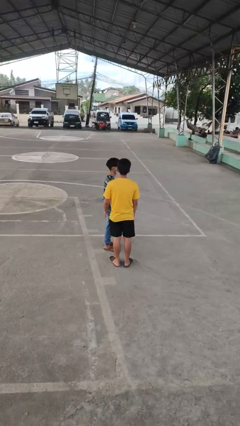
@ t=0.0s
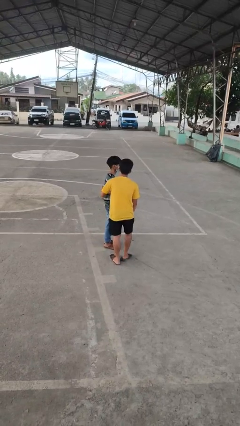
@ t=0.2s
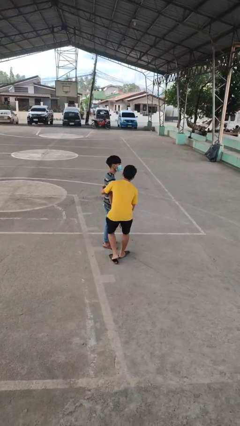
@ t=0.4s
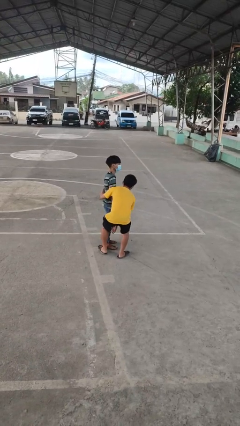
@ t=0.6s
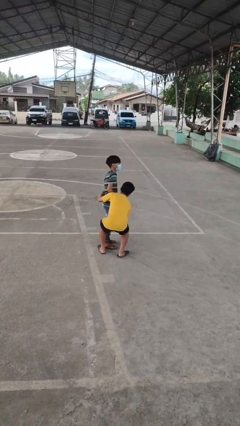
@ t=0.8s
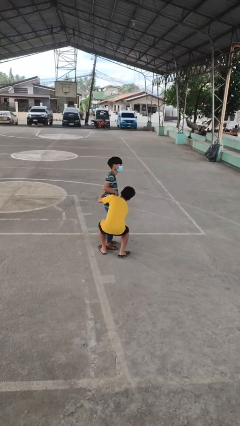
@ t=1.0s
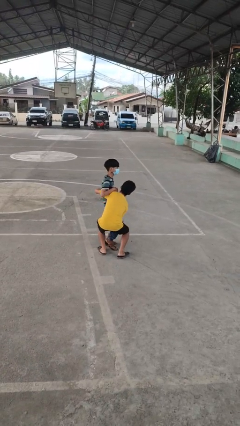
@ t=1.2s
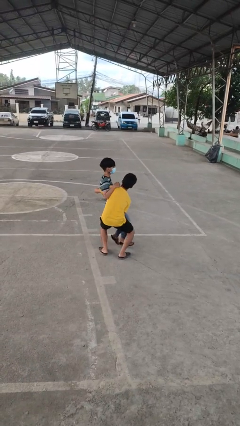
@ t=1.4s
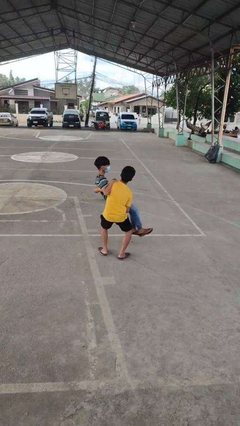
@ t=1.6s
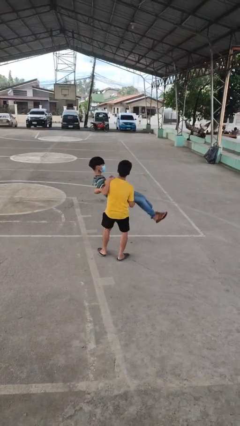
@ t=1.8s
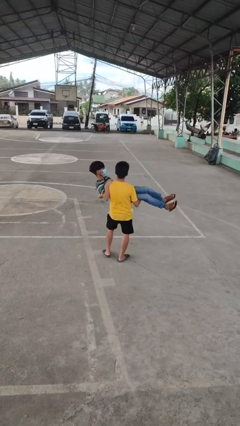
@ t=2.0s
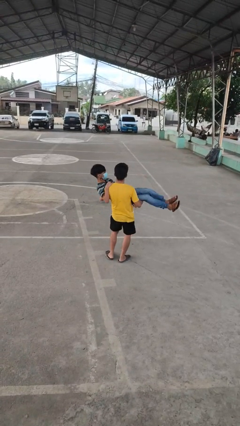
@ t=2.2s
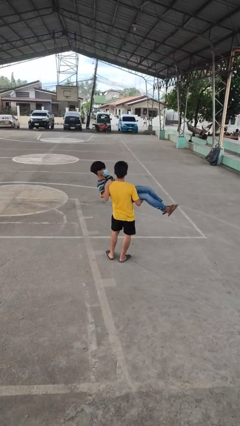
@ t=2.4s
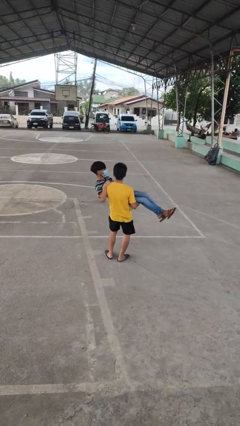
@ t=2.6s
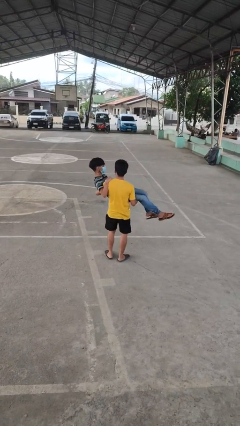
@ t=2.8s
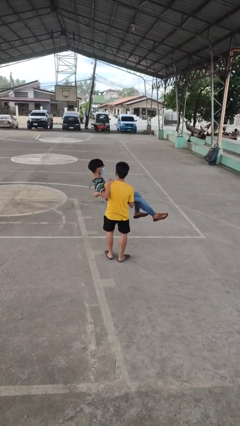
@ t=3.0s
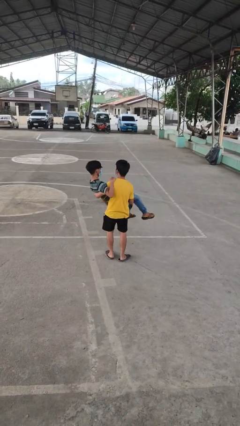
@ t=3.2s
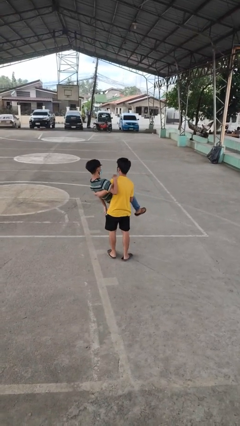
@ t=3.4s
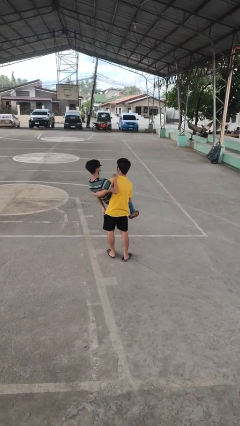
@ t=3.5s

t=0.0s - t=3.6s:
person picks up person

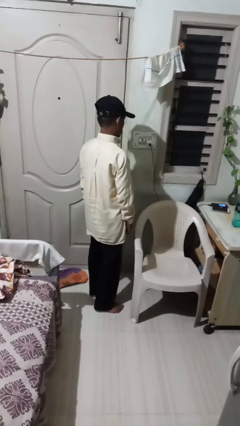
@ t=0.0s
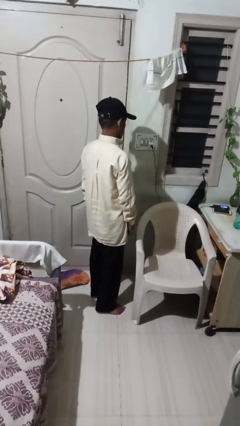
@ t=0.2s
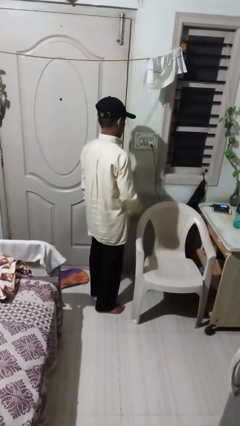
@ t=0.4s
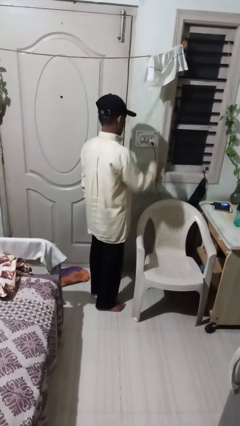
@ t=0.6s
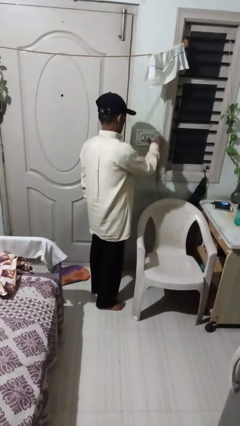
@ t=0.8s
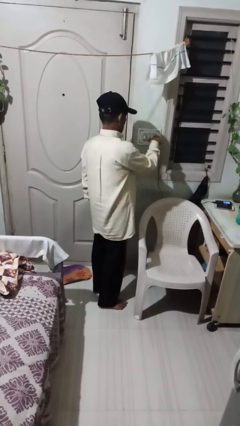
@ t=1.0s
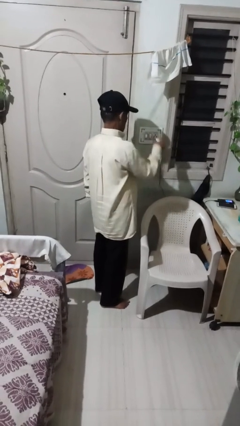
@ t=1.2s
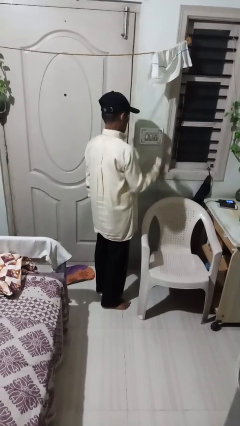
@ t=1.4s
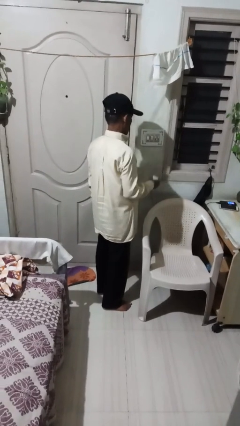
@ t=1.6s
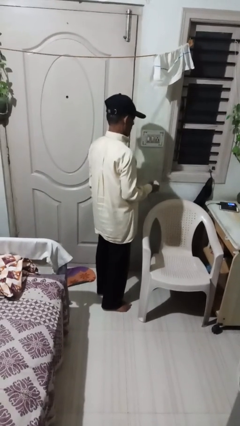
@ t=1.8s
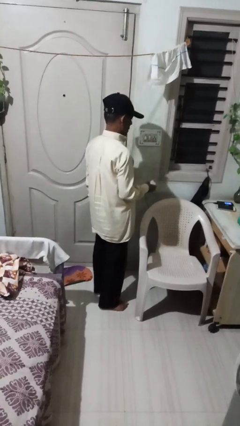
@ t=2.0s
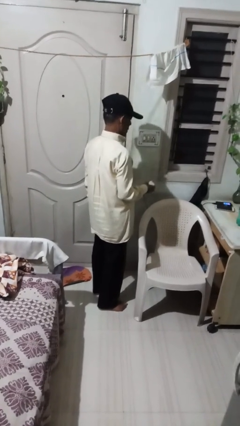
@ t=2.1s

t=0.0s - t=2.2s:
person unplugs from electrical socket

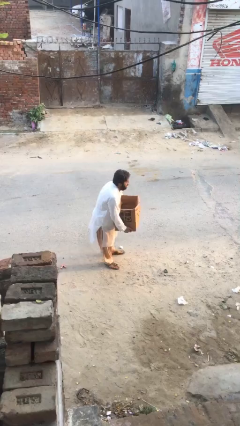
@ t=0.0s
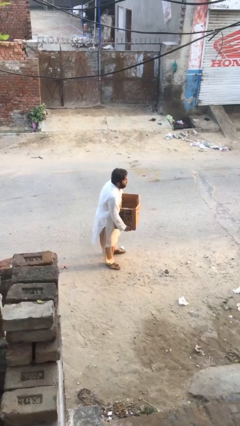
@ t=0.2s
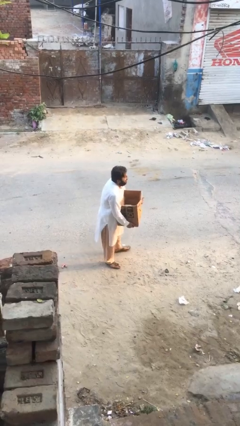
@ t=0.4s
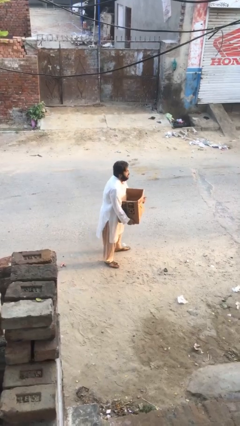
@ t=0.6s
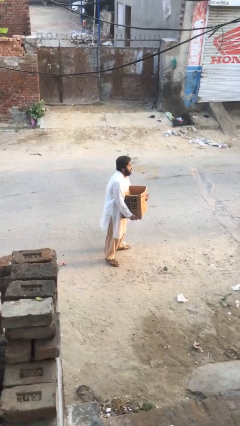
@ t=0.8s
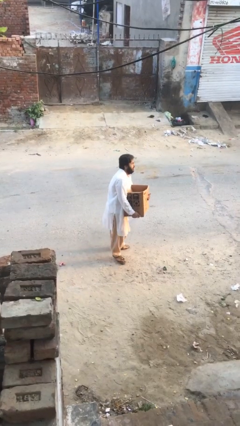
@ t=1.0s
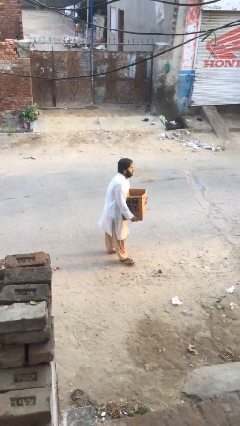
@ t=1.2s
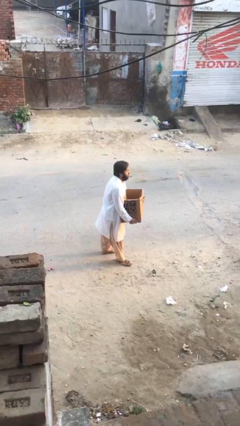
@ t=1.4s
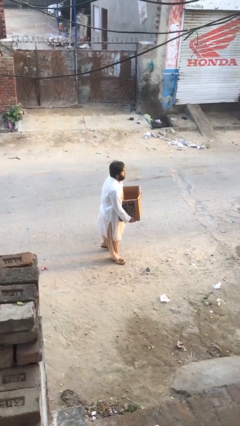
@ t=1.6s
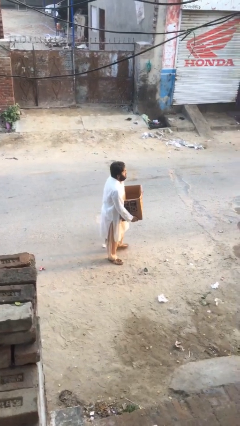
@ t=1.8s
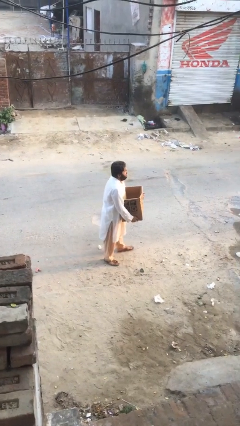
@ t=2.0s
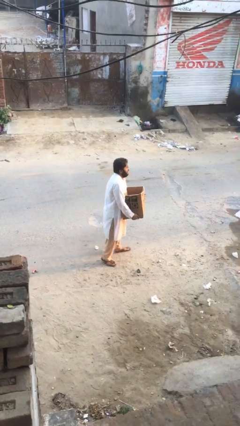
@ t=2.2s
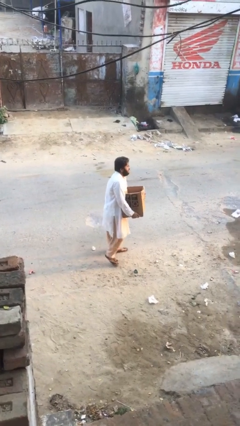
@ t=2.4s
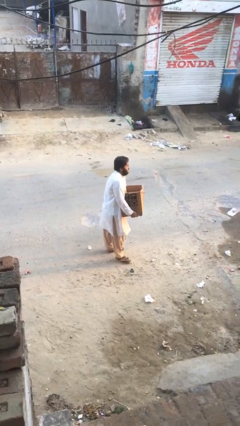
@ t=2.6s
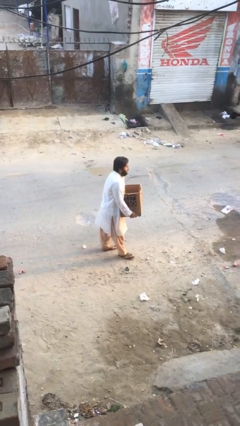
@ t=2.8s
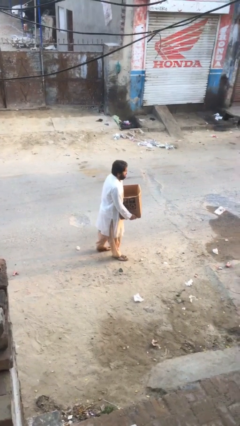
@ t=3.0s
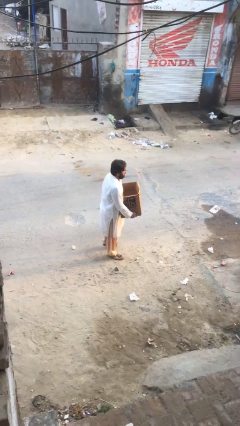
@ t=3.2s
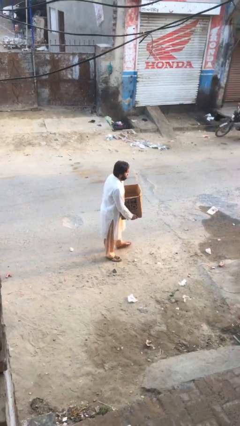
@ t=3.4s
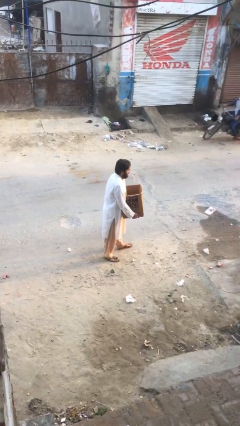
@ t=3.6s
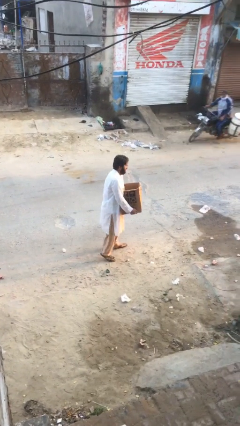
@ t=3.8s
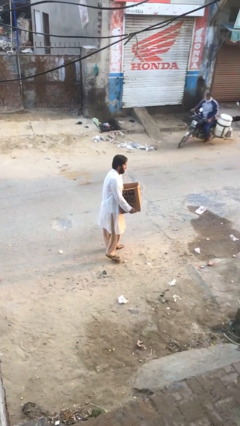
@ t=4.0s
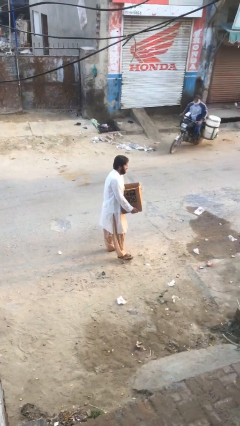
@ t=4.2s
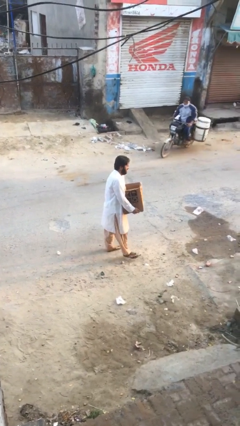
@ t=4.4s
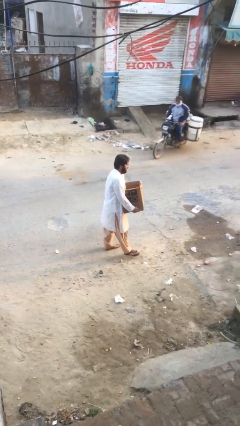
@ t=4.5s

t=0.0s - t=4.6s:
person carries heavy object

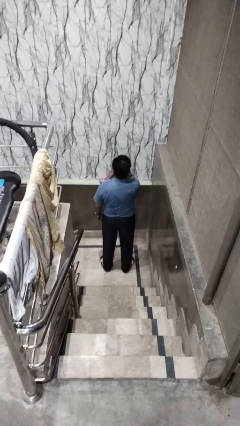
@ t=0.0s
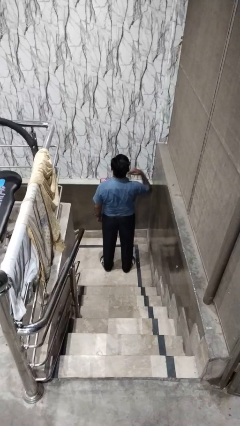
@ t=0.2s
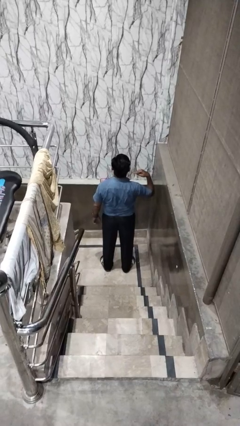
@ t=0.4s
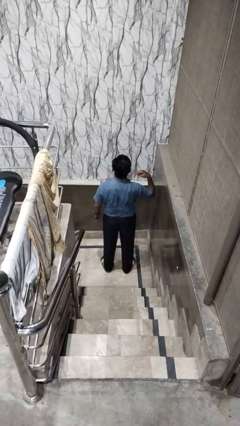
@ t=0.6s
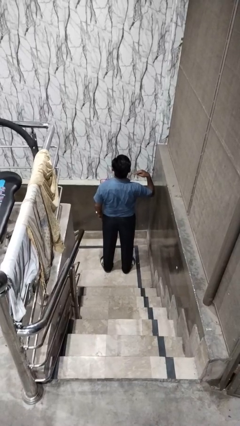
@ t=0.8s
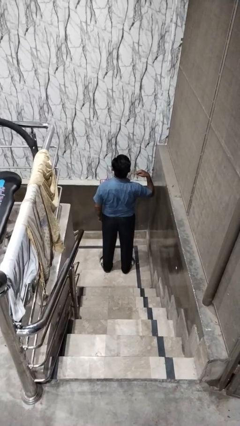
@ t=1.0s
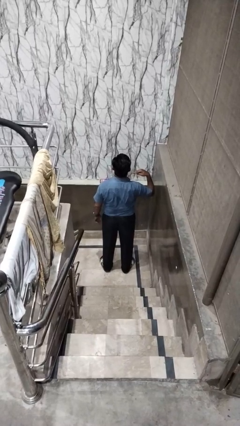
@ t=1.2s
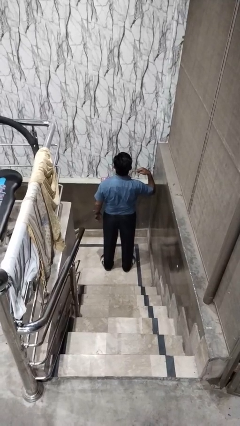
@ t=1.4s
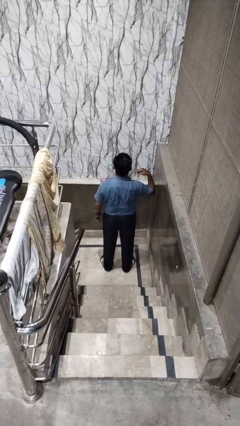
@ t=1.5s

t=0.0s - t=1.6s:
person gestures cut

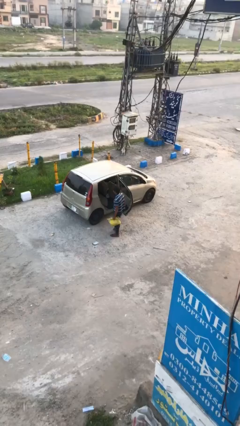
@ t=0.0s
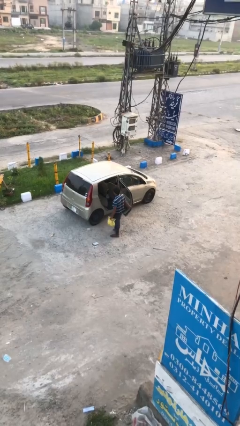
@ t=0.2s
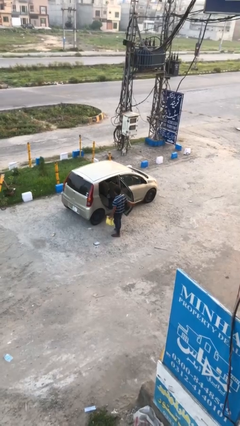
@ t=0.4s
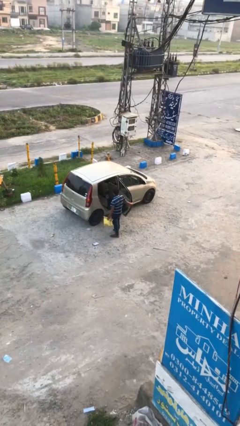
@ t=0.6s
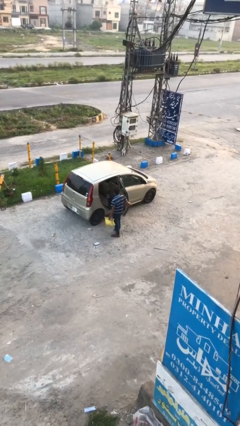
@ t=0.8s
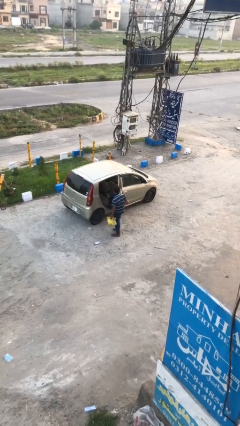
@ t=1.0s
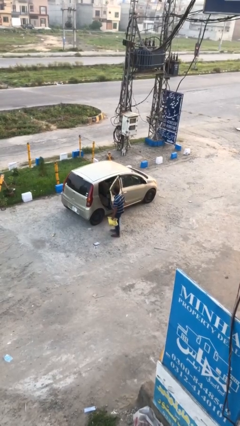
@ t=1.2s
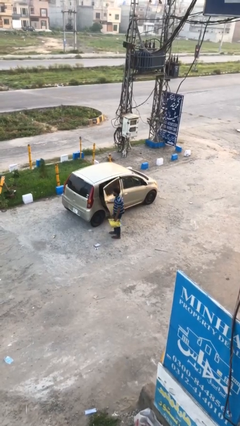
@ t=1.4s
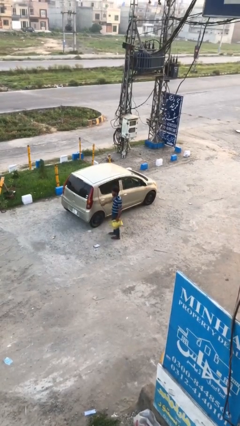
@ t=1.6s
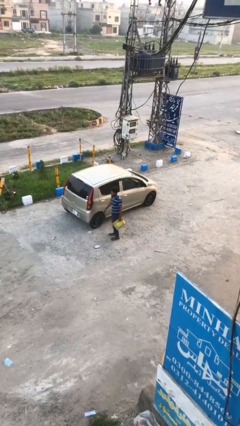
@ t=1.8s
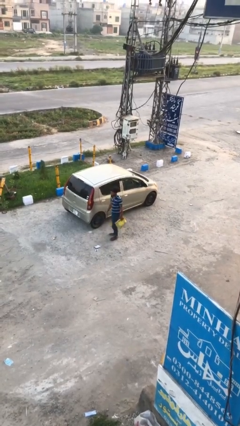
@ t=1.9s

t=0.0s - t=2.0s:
person closes car door

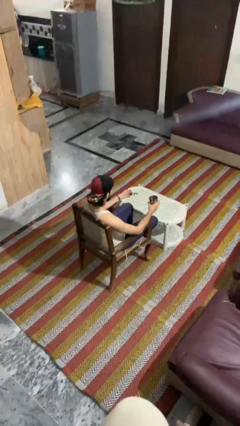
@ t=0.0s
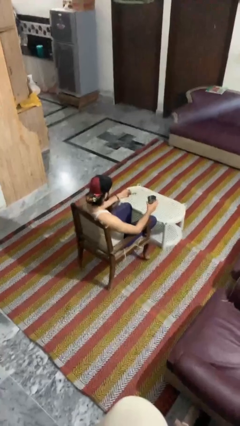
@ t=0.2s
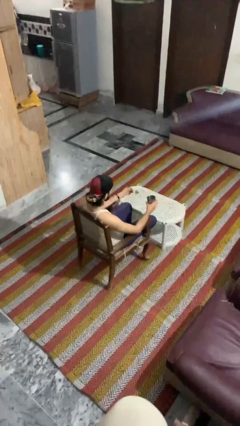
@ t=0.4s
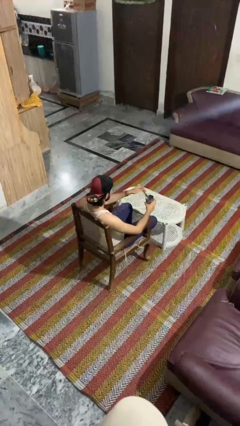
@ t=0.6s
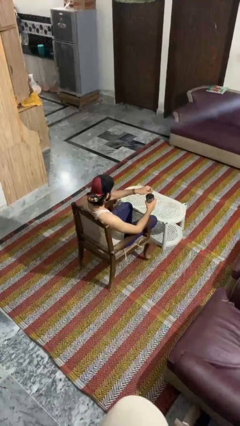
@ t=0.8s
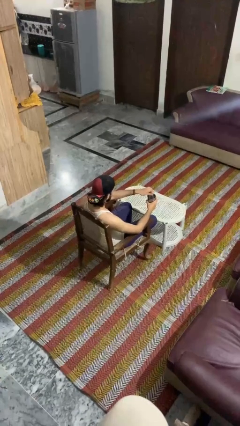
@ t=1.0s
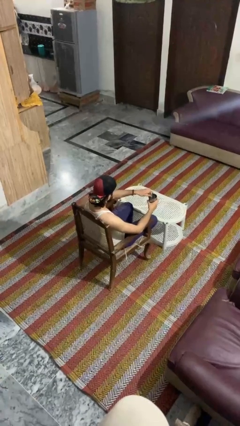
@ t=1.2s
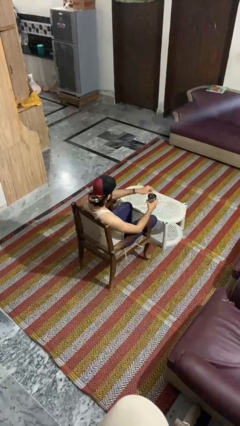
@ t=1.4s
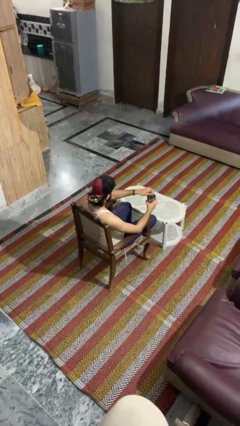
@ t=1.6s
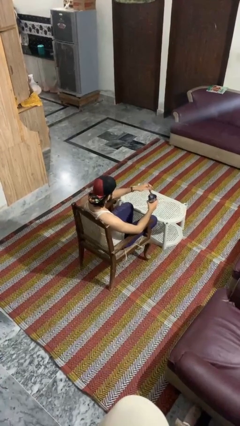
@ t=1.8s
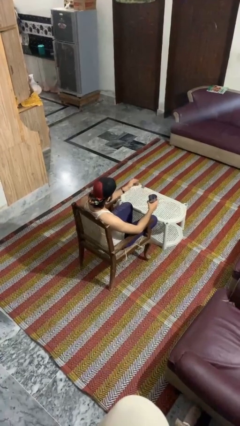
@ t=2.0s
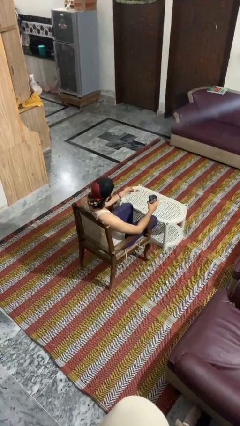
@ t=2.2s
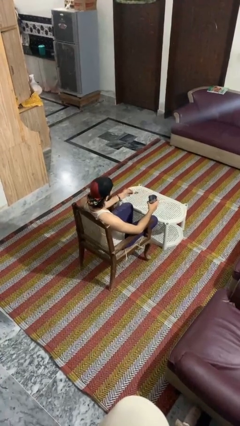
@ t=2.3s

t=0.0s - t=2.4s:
person stirs mug

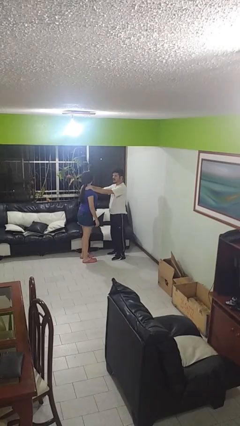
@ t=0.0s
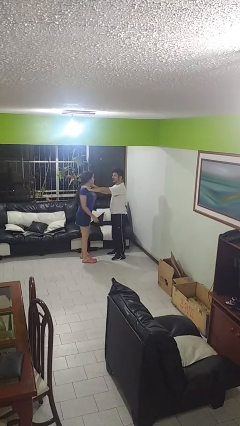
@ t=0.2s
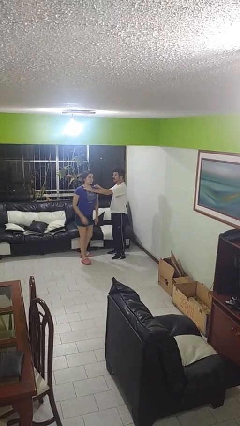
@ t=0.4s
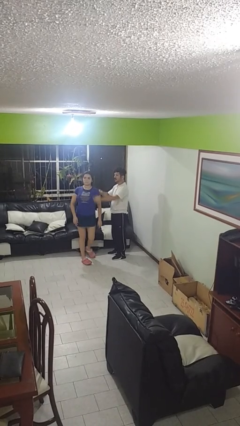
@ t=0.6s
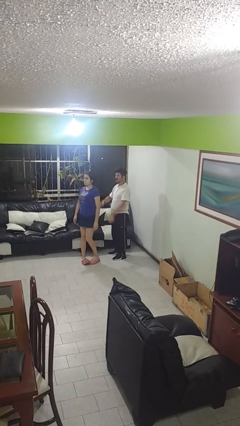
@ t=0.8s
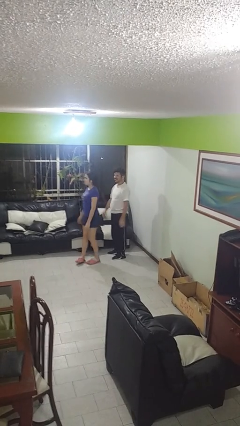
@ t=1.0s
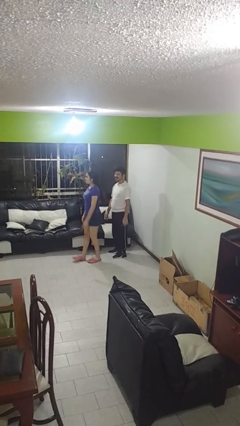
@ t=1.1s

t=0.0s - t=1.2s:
person spins person around
